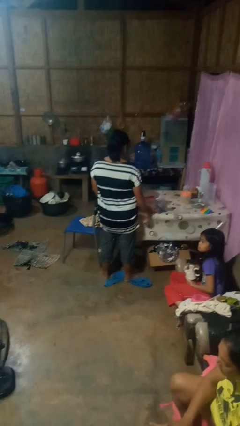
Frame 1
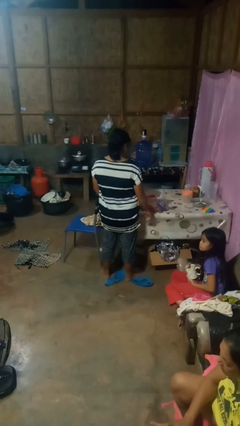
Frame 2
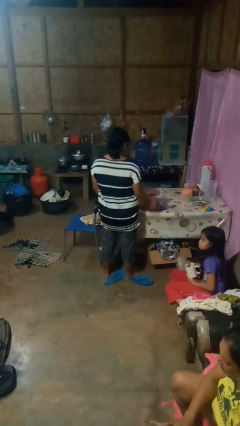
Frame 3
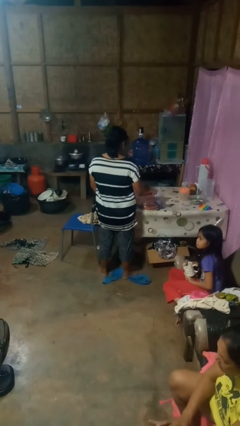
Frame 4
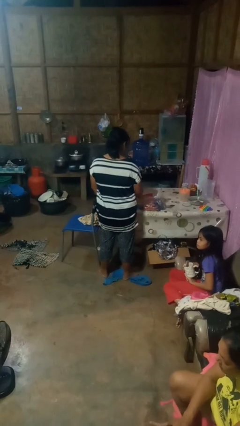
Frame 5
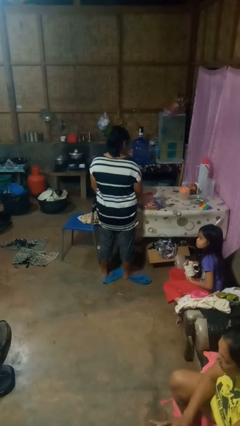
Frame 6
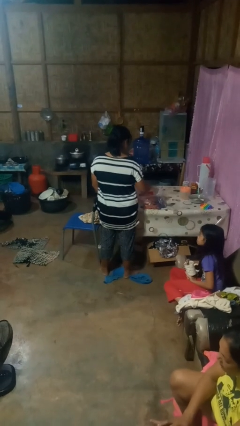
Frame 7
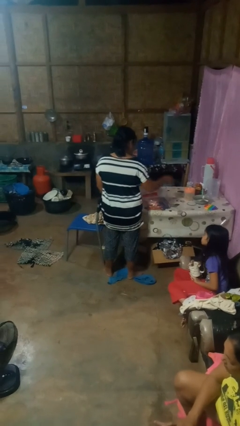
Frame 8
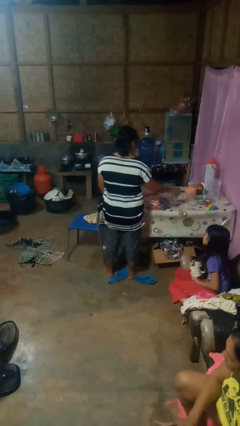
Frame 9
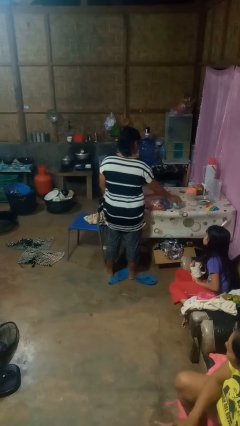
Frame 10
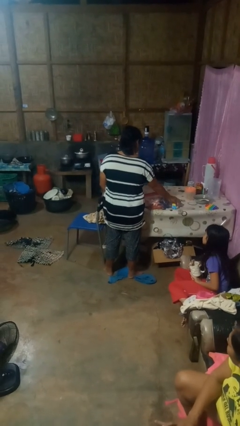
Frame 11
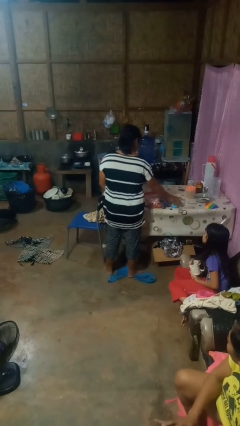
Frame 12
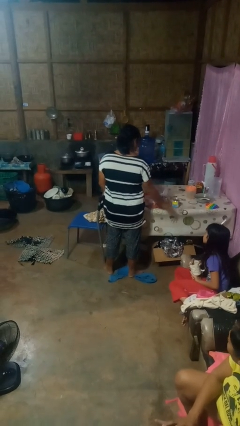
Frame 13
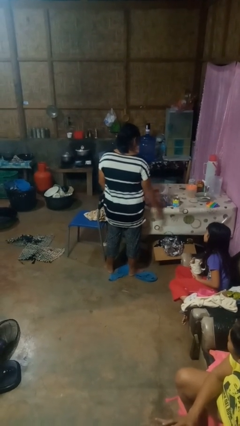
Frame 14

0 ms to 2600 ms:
person takes object from bag

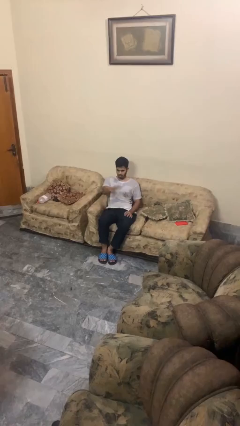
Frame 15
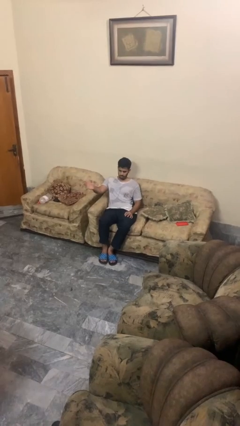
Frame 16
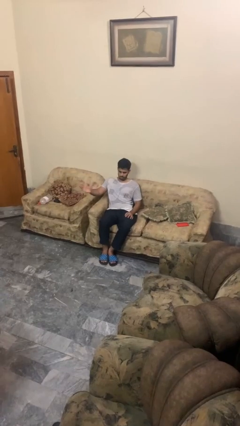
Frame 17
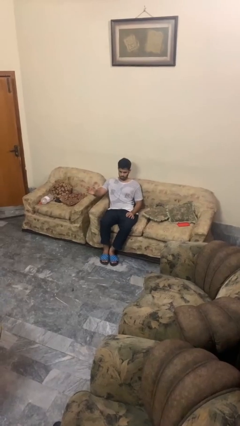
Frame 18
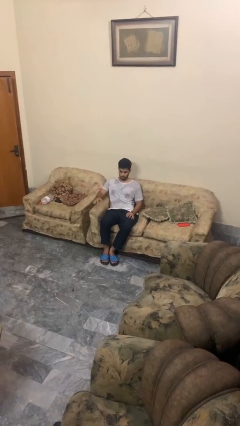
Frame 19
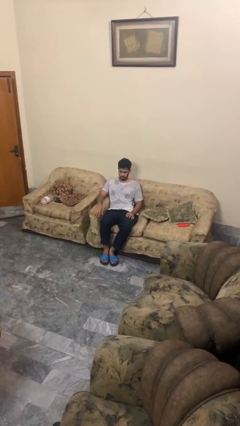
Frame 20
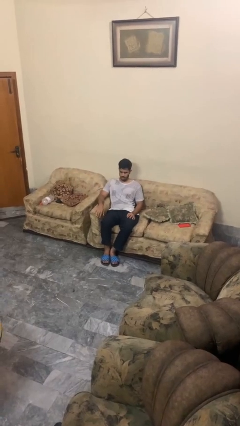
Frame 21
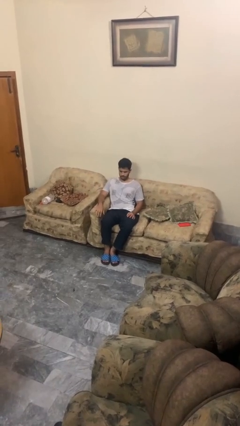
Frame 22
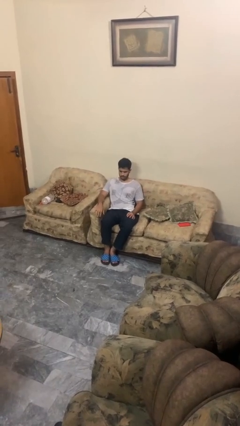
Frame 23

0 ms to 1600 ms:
person gestures swipe right

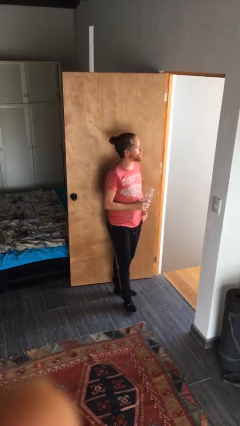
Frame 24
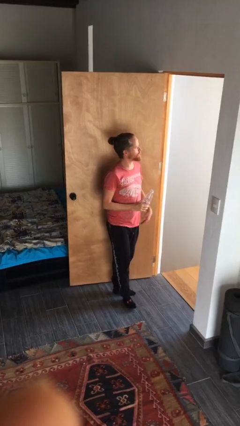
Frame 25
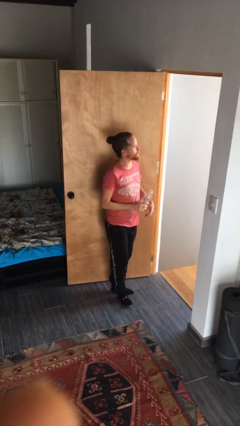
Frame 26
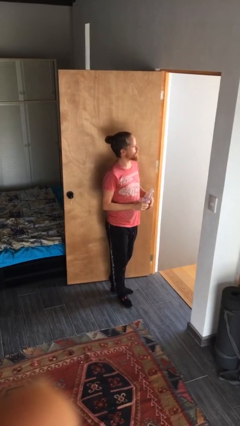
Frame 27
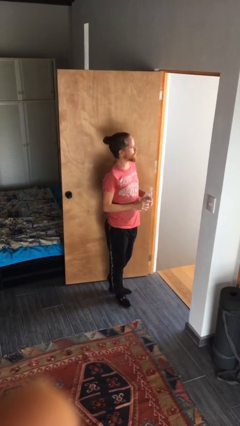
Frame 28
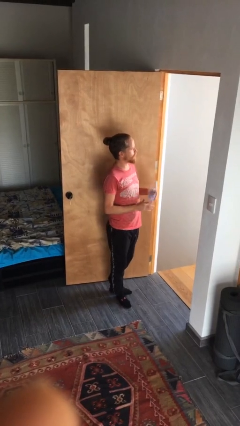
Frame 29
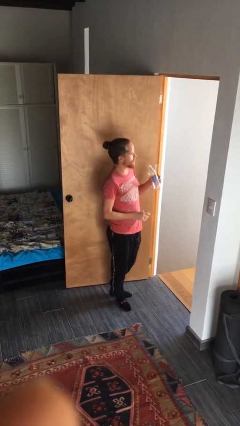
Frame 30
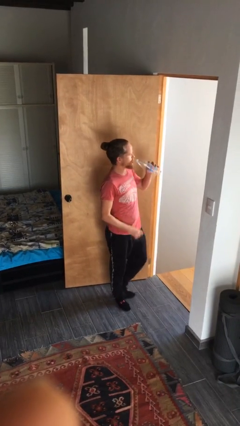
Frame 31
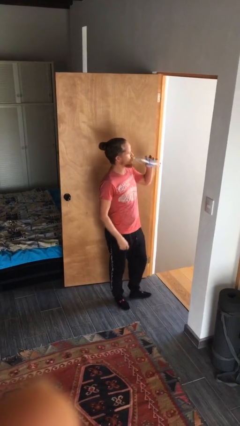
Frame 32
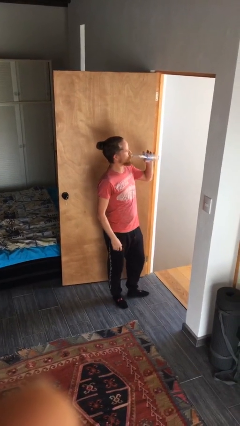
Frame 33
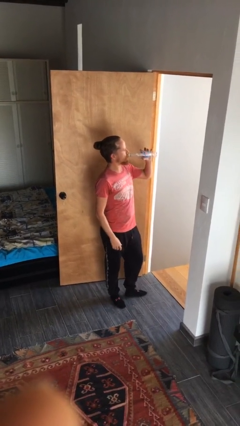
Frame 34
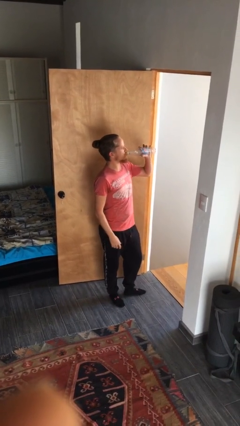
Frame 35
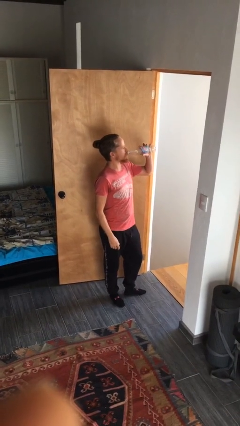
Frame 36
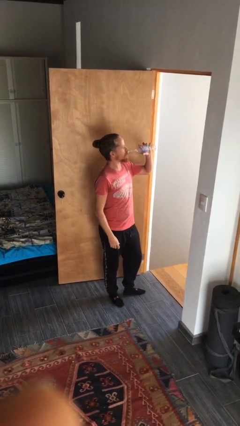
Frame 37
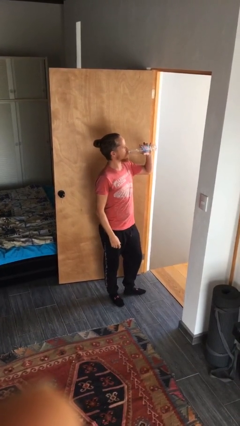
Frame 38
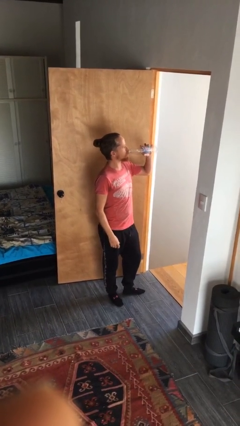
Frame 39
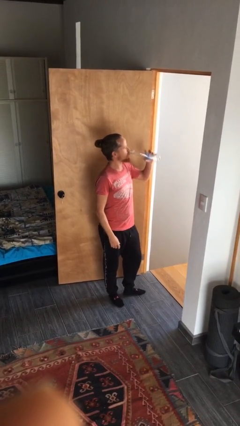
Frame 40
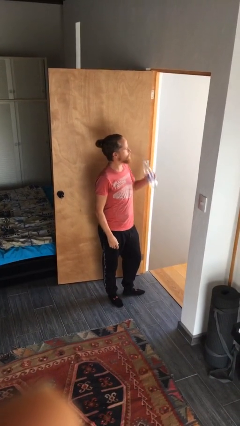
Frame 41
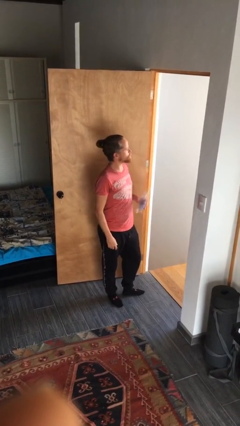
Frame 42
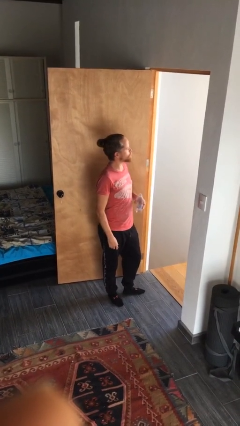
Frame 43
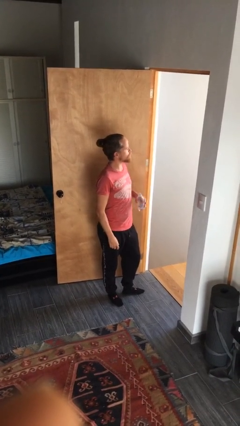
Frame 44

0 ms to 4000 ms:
person drinks from bottle

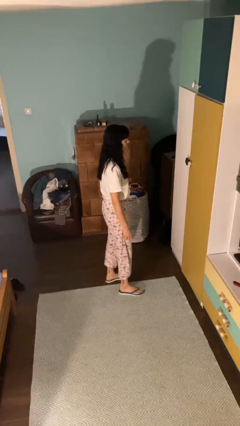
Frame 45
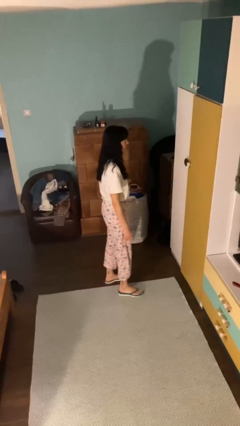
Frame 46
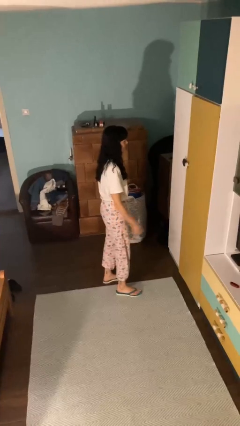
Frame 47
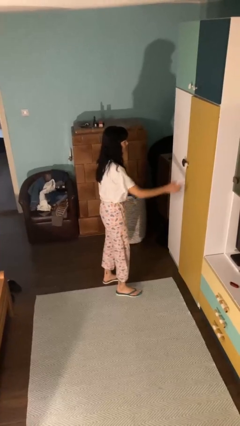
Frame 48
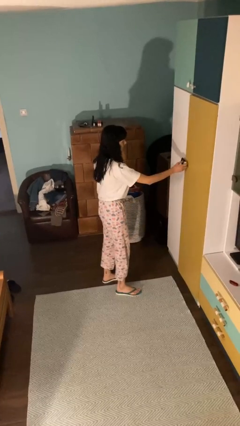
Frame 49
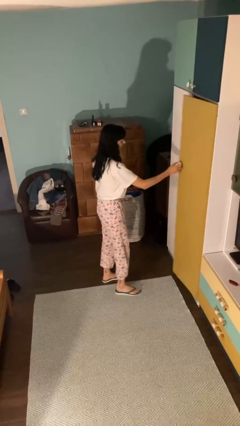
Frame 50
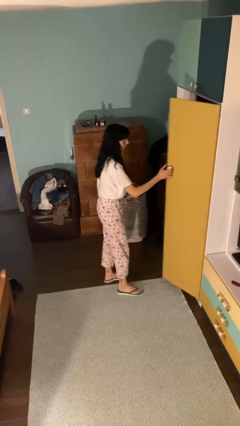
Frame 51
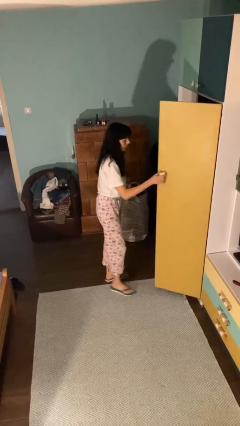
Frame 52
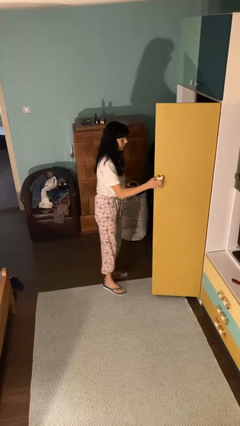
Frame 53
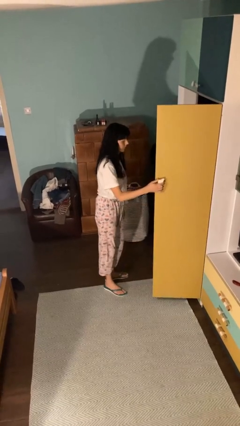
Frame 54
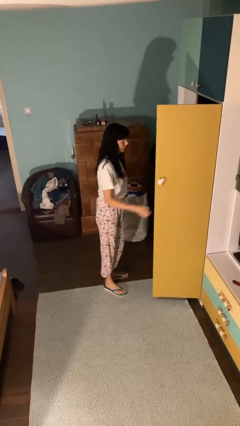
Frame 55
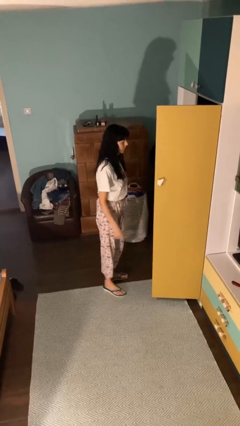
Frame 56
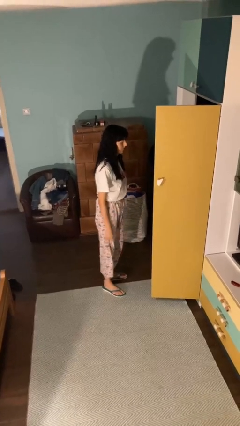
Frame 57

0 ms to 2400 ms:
person opens closet door

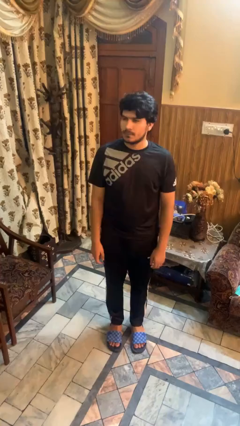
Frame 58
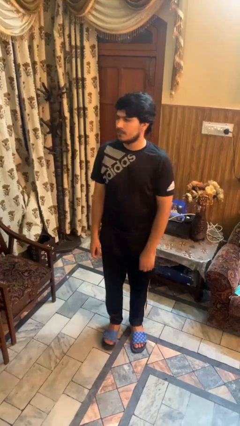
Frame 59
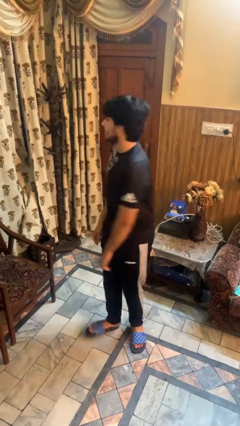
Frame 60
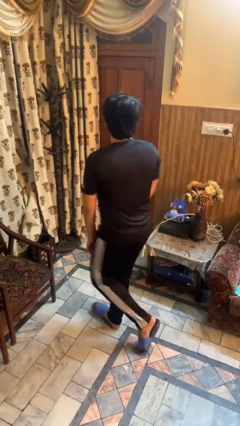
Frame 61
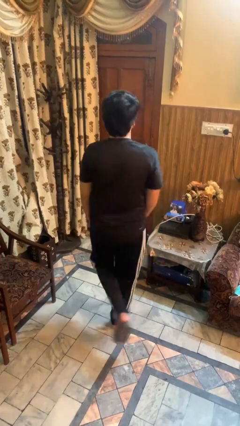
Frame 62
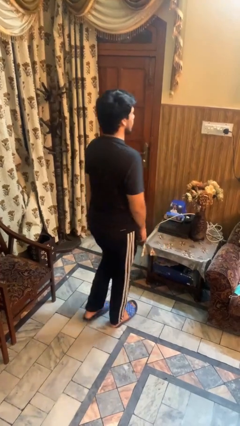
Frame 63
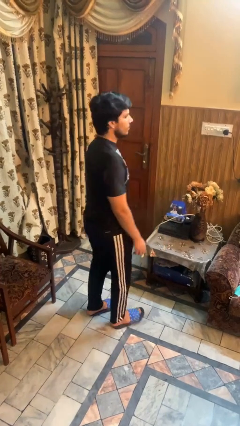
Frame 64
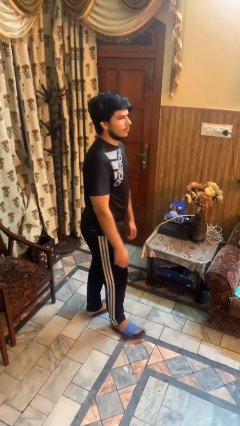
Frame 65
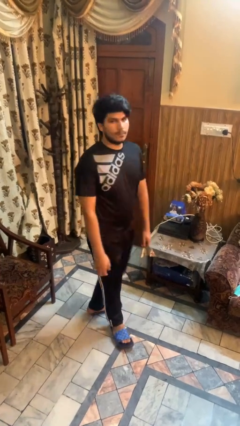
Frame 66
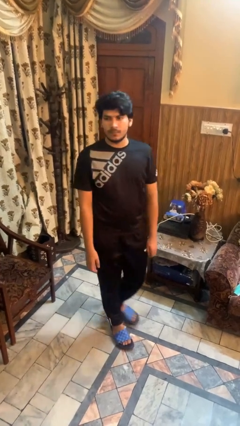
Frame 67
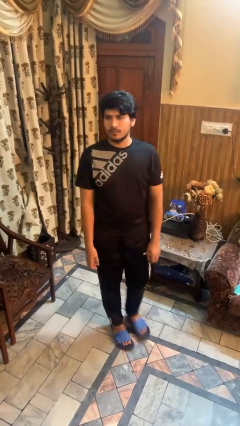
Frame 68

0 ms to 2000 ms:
person twirls

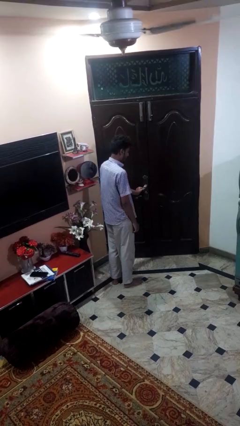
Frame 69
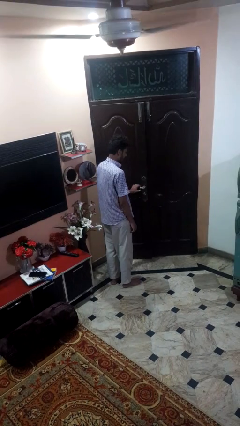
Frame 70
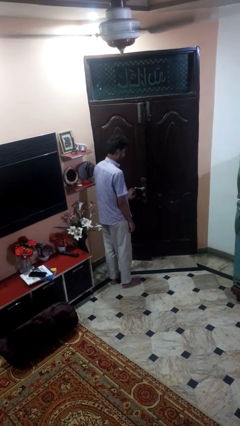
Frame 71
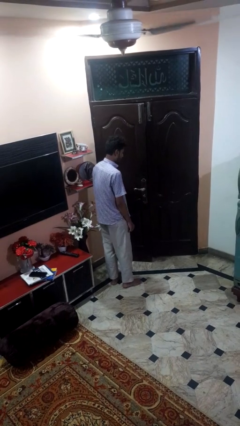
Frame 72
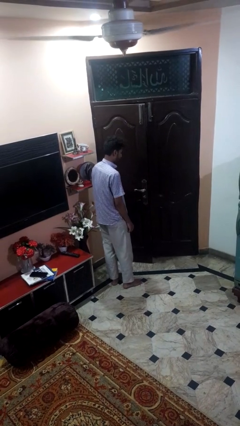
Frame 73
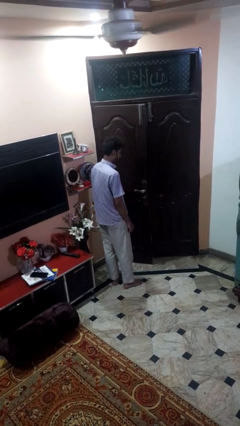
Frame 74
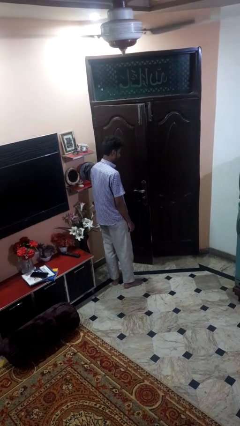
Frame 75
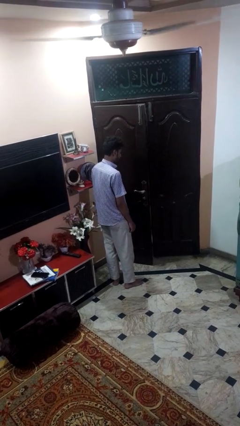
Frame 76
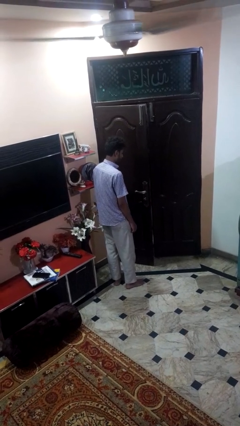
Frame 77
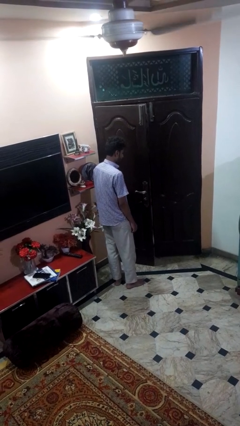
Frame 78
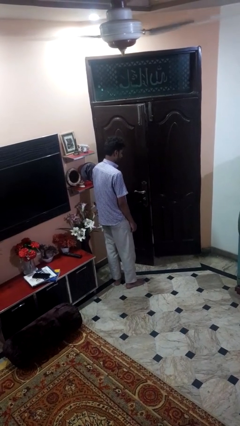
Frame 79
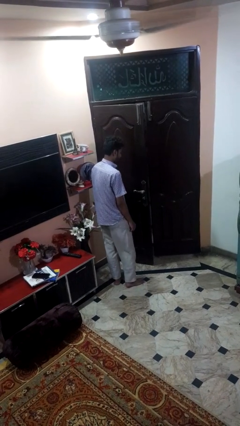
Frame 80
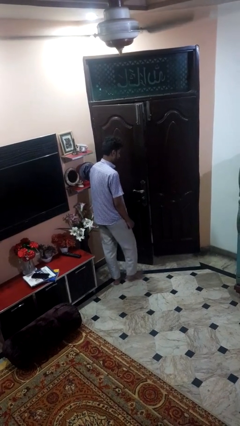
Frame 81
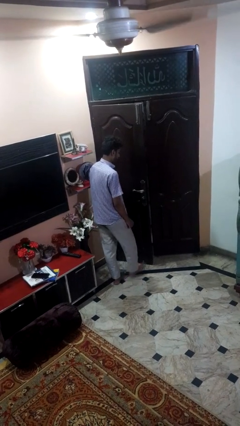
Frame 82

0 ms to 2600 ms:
person opens facility door

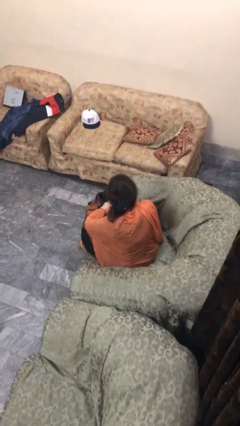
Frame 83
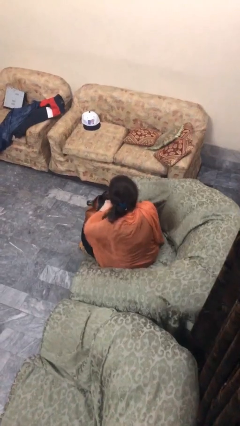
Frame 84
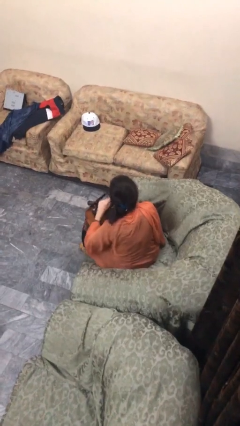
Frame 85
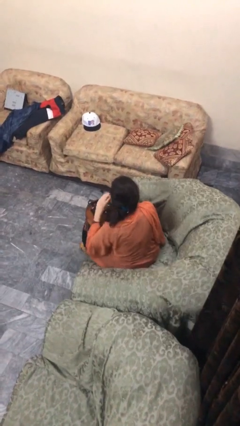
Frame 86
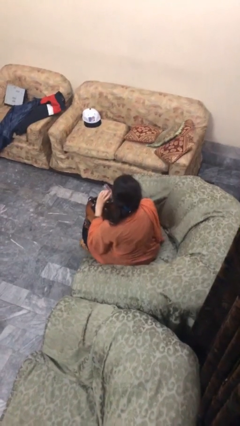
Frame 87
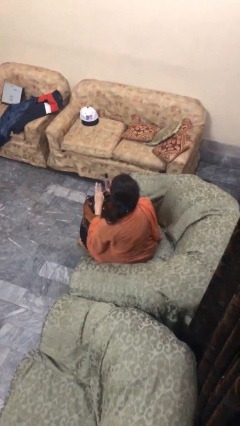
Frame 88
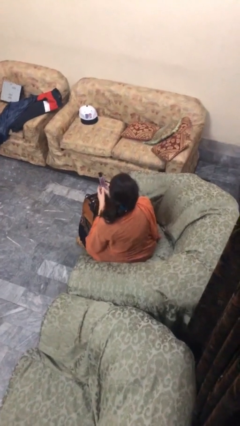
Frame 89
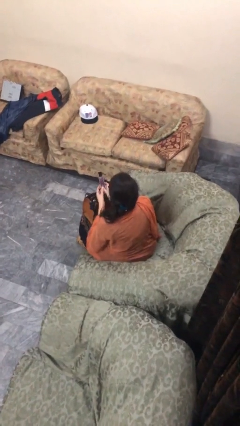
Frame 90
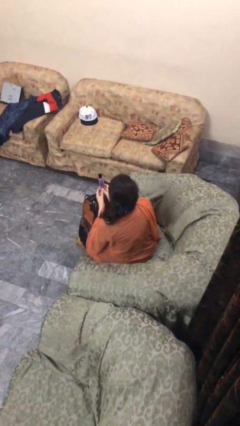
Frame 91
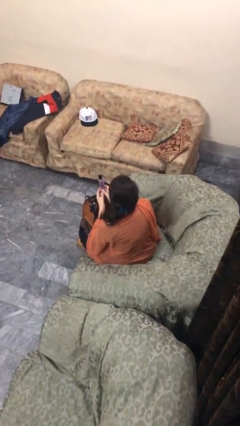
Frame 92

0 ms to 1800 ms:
person takes object from purse

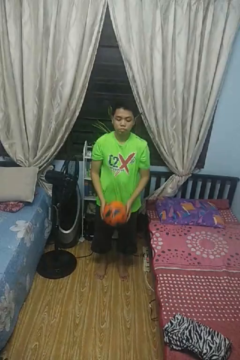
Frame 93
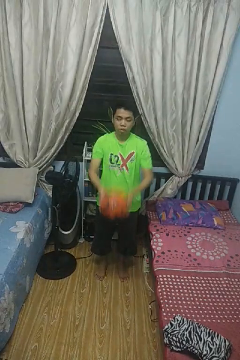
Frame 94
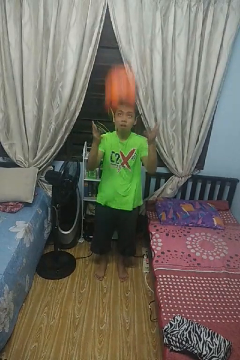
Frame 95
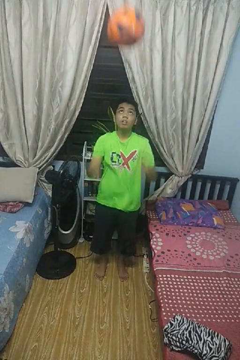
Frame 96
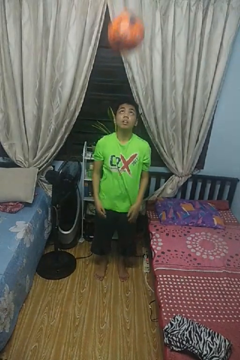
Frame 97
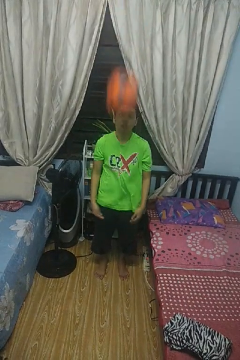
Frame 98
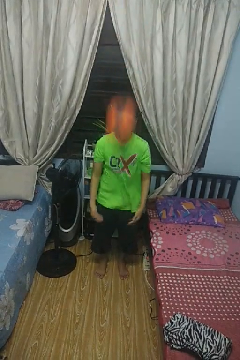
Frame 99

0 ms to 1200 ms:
person drops object
